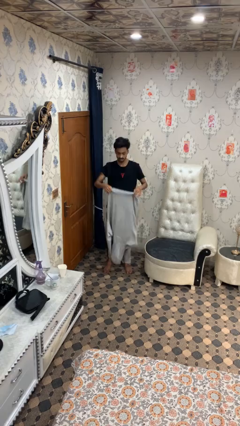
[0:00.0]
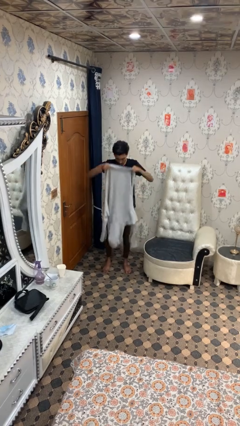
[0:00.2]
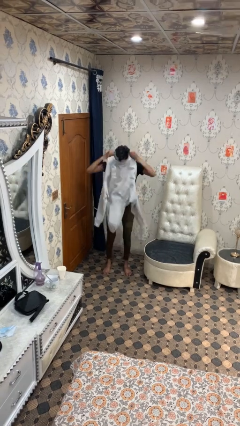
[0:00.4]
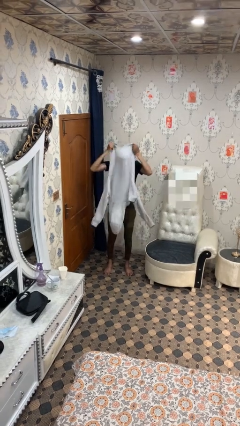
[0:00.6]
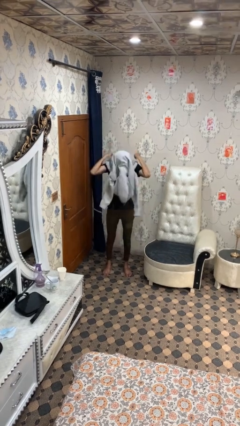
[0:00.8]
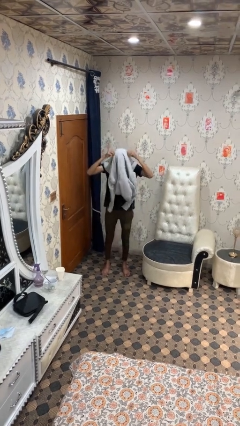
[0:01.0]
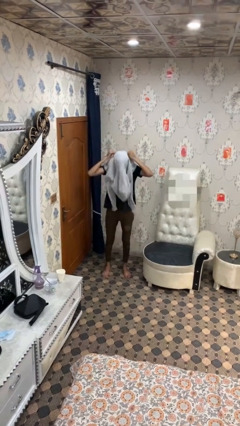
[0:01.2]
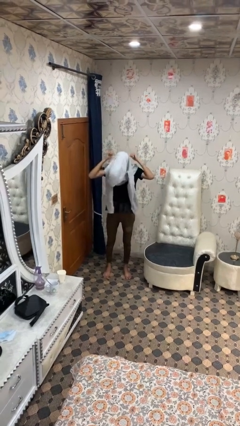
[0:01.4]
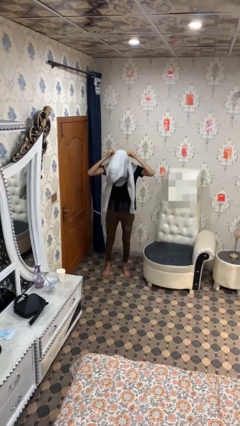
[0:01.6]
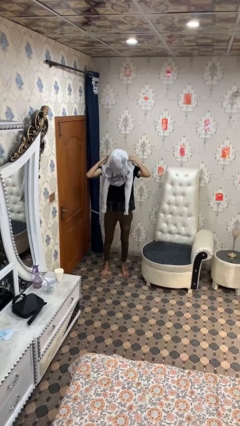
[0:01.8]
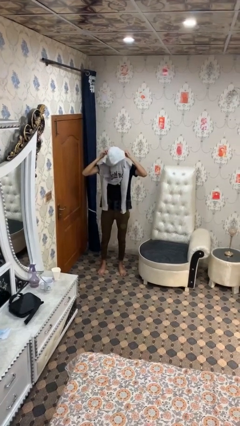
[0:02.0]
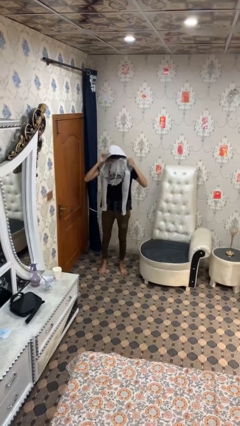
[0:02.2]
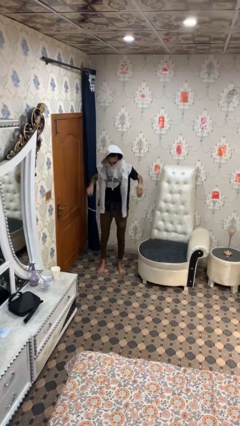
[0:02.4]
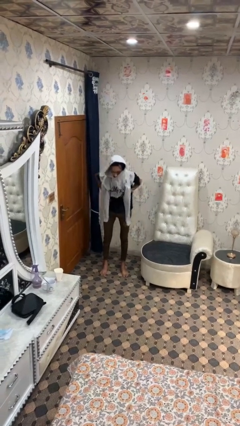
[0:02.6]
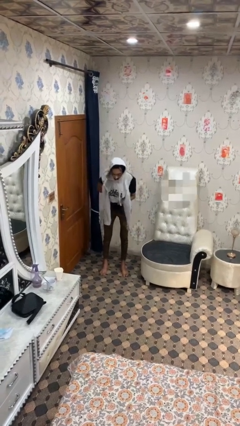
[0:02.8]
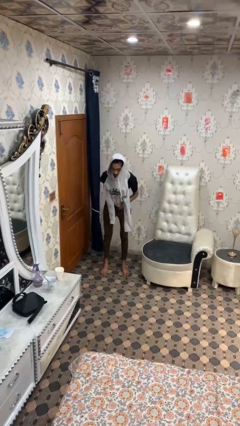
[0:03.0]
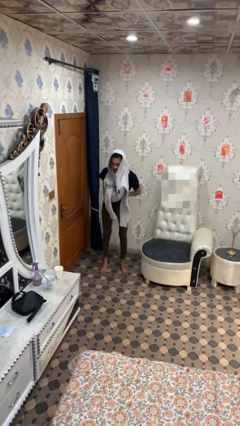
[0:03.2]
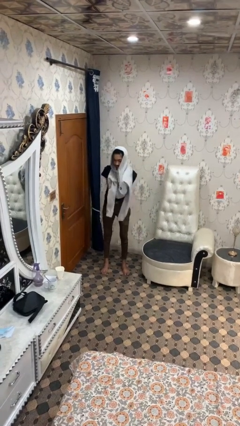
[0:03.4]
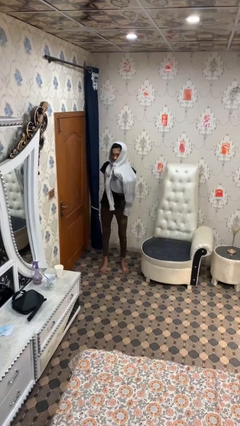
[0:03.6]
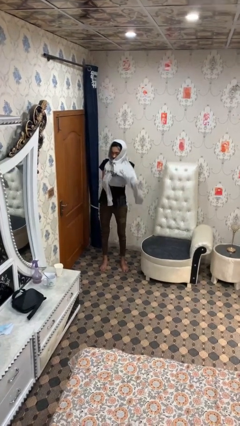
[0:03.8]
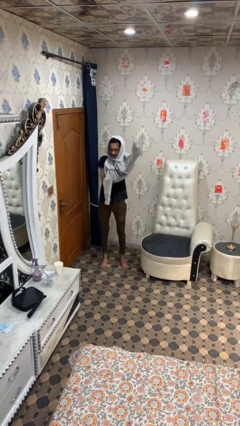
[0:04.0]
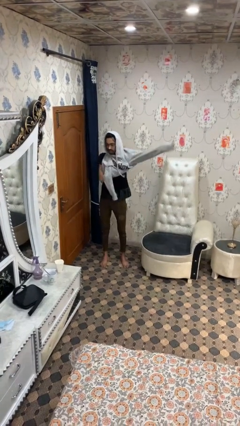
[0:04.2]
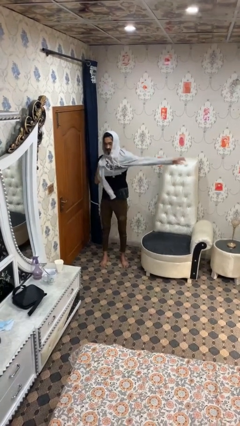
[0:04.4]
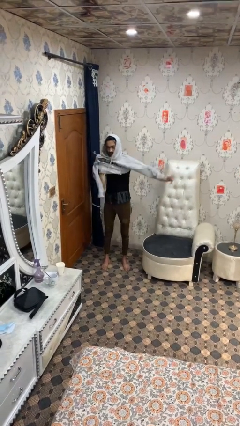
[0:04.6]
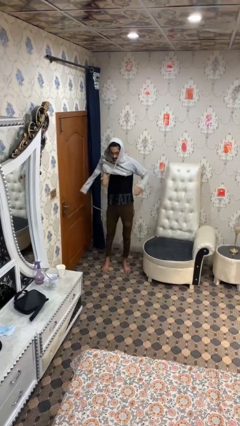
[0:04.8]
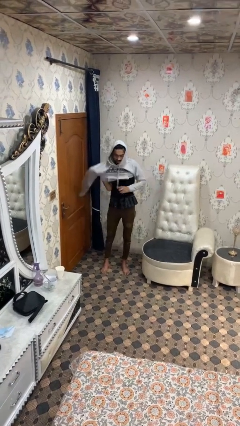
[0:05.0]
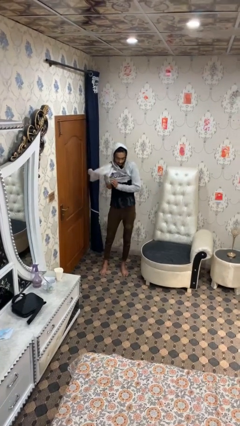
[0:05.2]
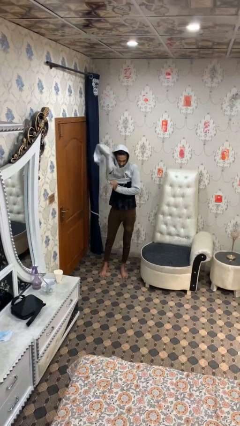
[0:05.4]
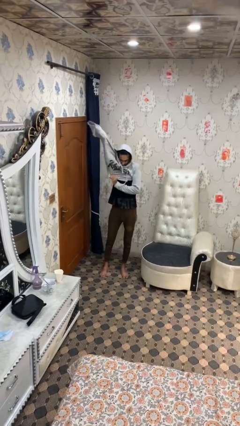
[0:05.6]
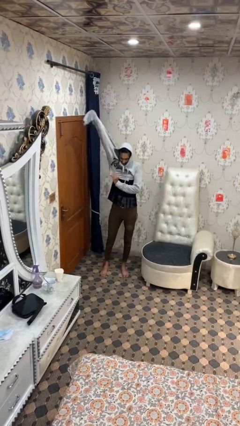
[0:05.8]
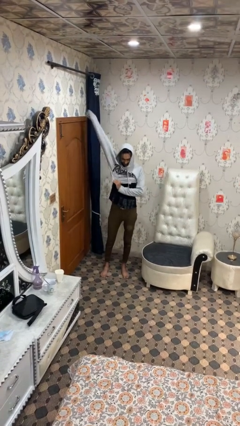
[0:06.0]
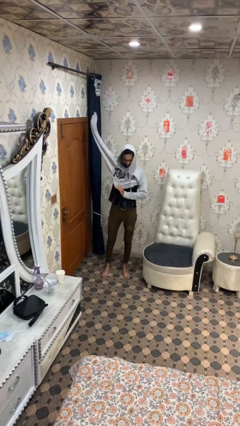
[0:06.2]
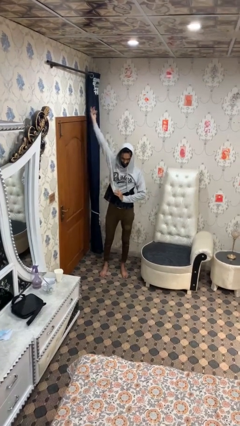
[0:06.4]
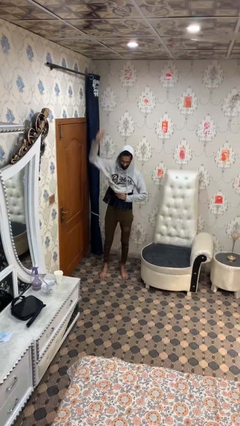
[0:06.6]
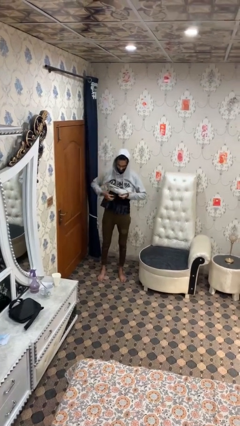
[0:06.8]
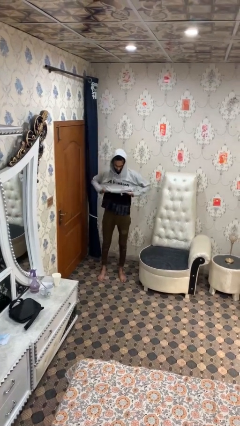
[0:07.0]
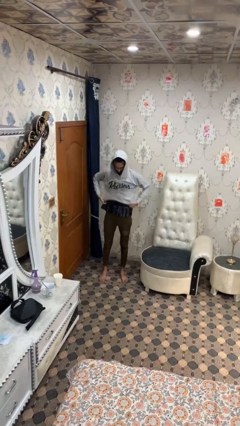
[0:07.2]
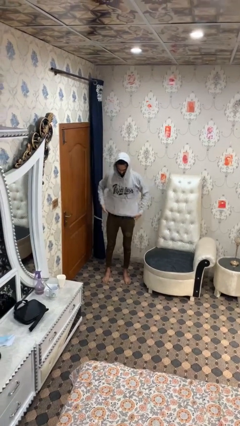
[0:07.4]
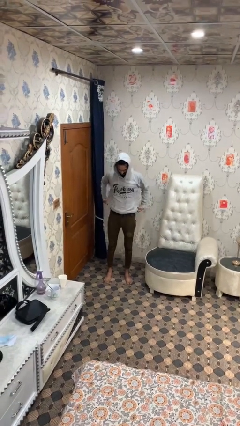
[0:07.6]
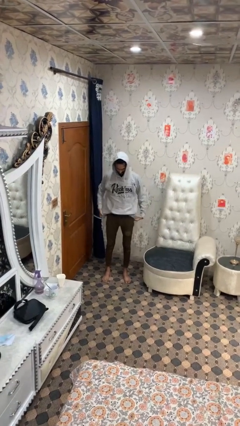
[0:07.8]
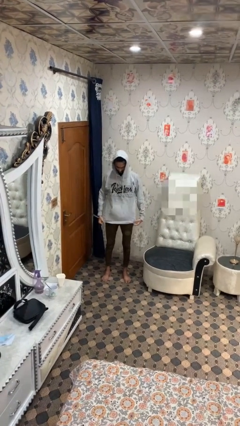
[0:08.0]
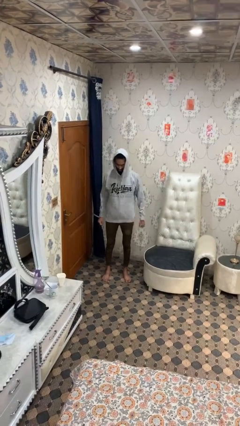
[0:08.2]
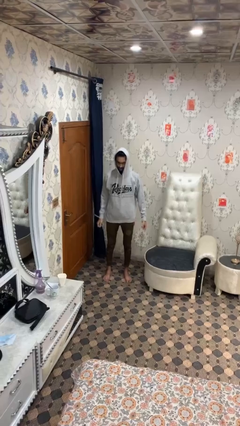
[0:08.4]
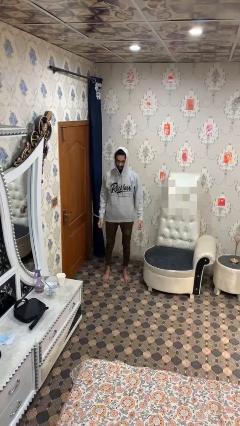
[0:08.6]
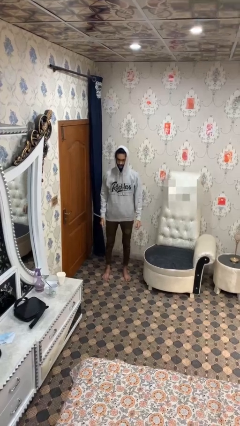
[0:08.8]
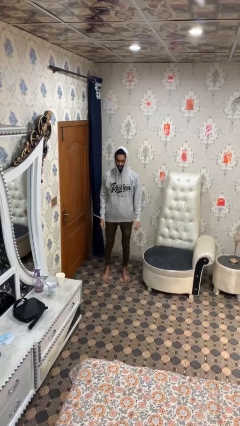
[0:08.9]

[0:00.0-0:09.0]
person puts on hoodie

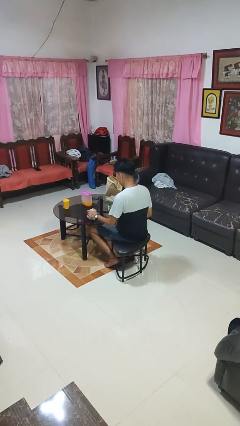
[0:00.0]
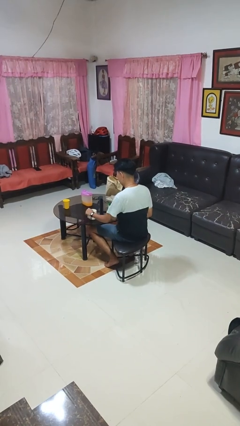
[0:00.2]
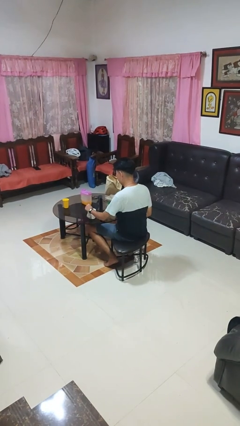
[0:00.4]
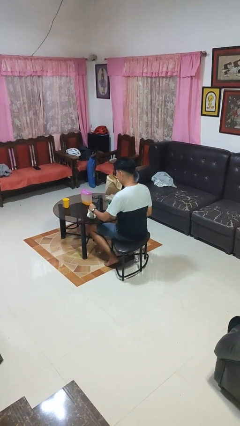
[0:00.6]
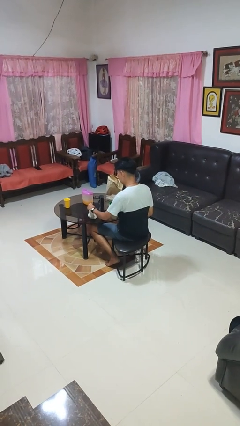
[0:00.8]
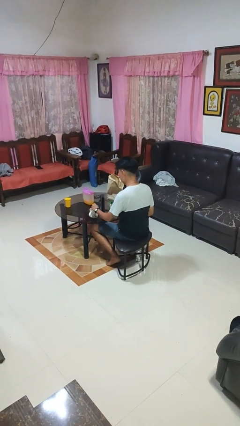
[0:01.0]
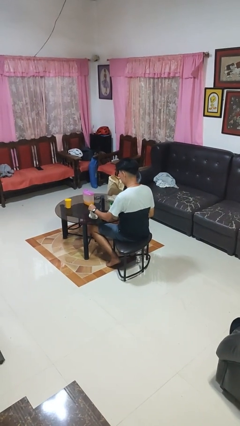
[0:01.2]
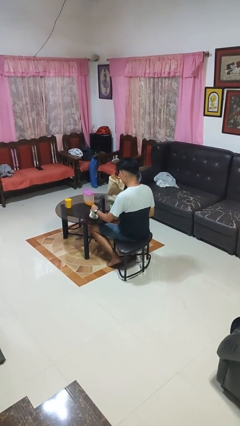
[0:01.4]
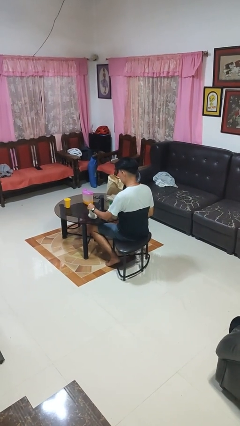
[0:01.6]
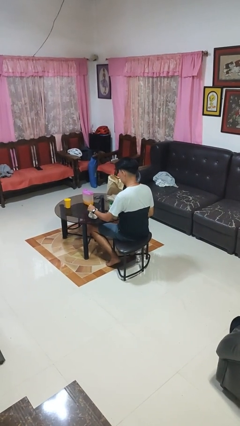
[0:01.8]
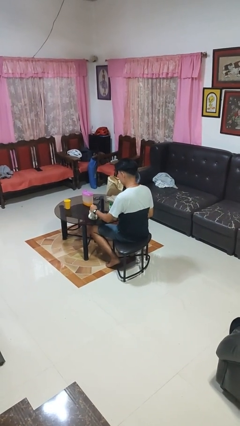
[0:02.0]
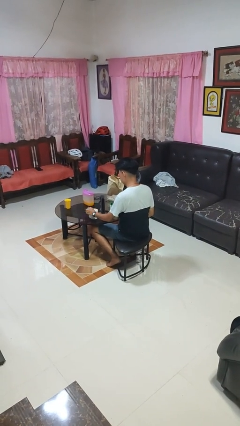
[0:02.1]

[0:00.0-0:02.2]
person stirs mug

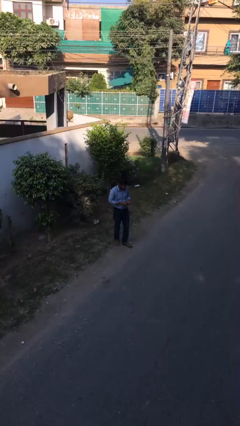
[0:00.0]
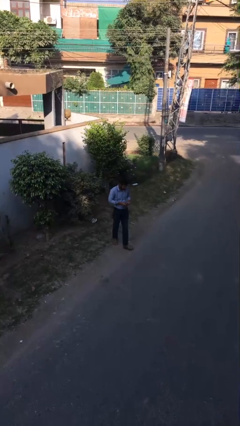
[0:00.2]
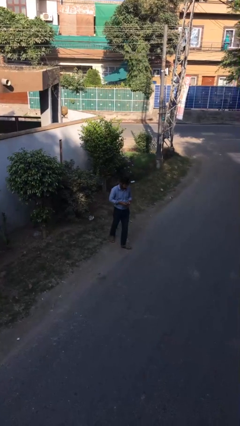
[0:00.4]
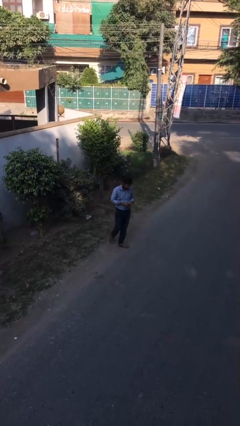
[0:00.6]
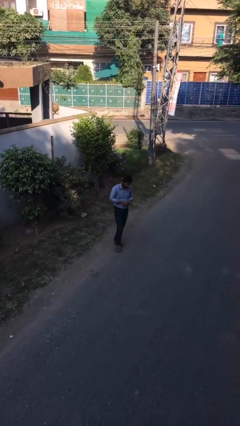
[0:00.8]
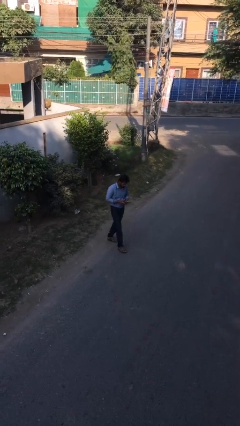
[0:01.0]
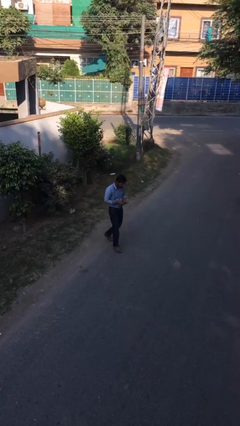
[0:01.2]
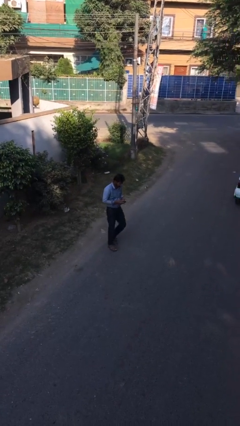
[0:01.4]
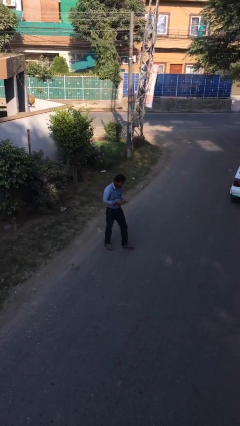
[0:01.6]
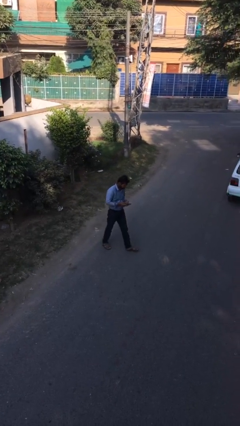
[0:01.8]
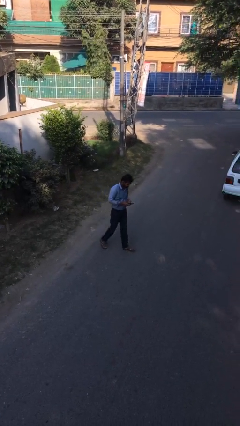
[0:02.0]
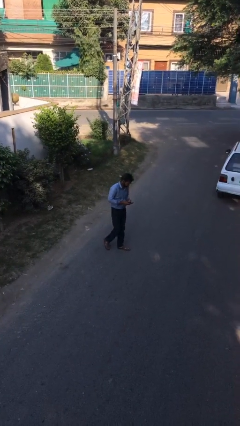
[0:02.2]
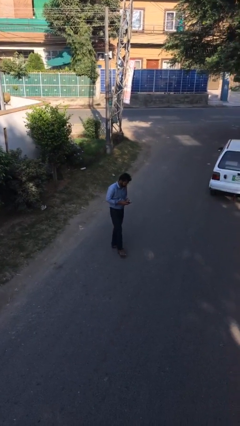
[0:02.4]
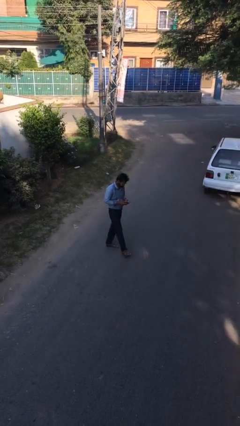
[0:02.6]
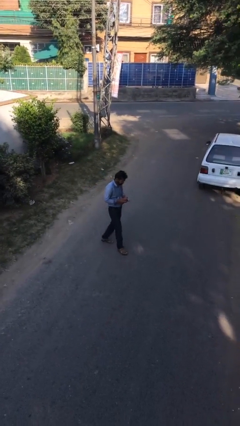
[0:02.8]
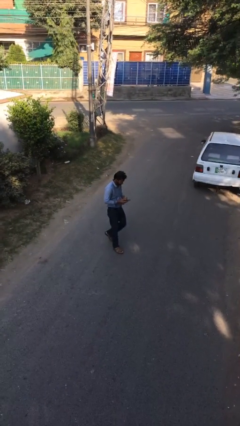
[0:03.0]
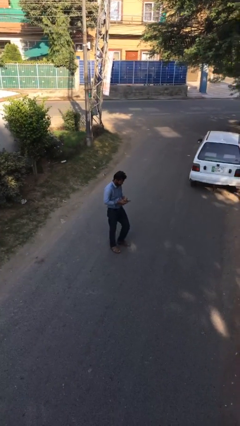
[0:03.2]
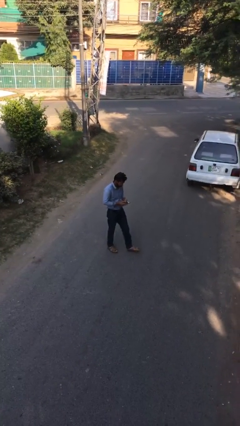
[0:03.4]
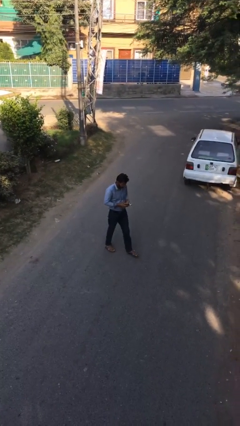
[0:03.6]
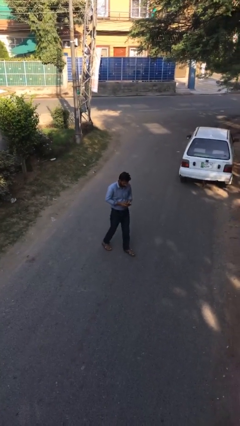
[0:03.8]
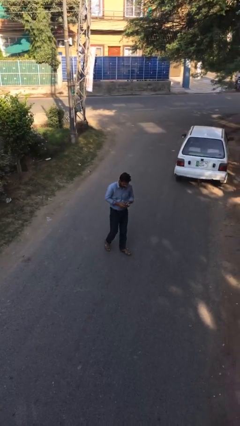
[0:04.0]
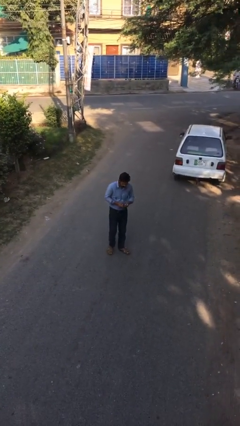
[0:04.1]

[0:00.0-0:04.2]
person texts on phone

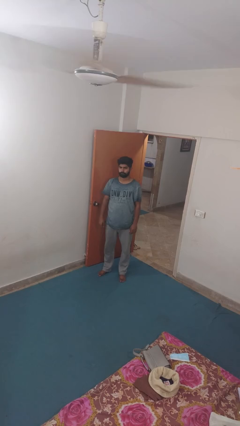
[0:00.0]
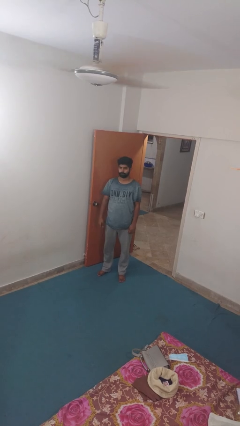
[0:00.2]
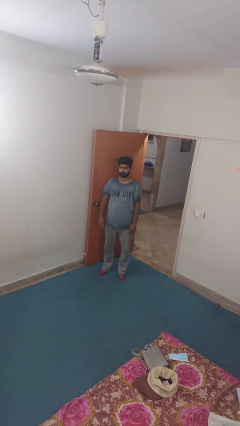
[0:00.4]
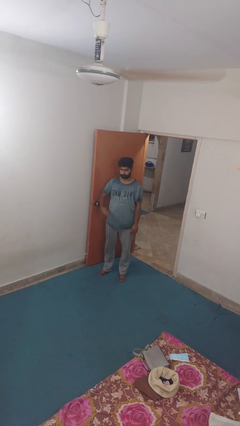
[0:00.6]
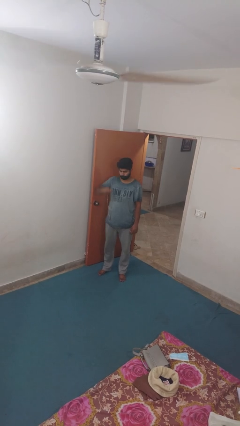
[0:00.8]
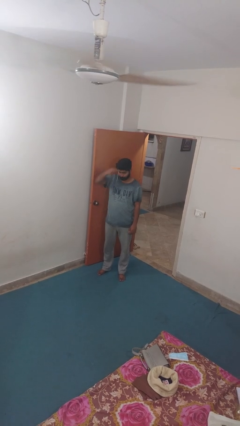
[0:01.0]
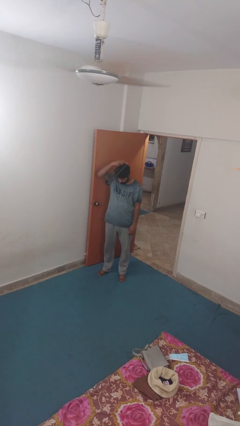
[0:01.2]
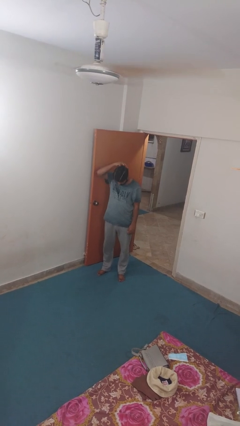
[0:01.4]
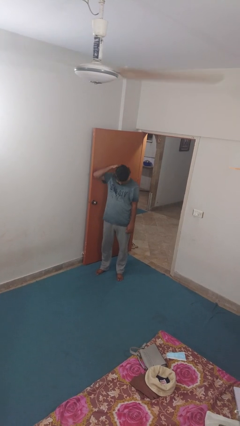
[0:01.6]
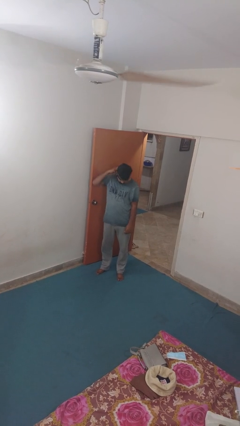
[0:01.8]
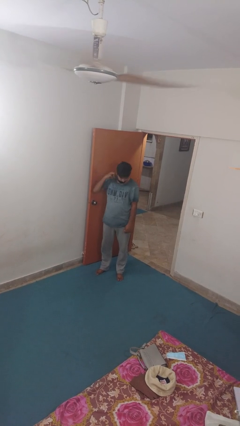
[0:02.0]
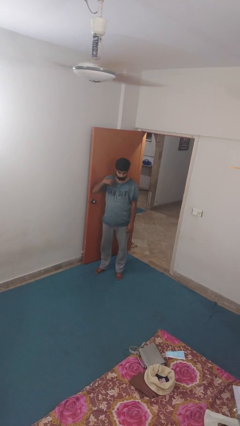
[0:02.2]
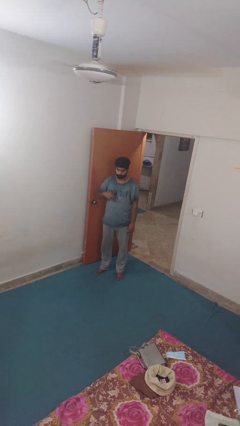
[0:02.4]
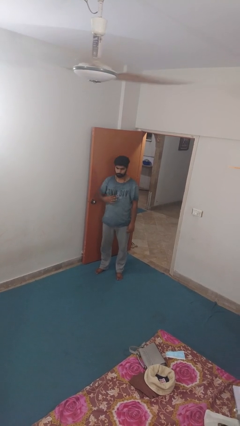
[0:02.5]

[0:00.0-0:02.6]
person puts on necklace
